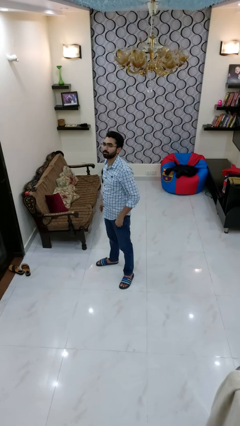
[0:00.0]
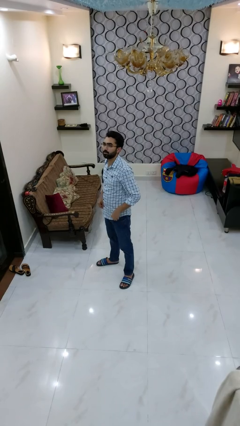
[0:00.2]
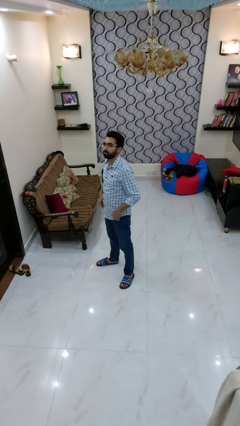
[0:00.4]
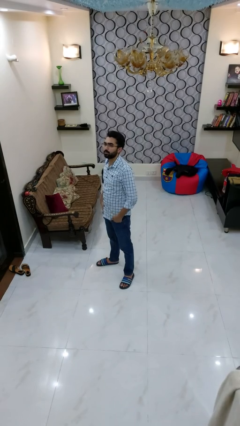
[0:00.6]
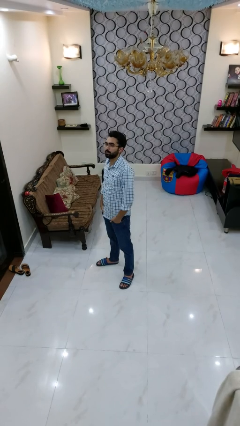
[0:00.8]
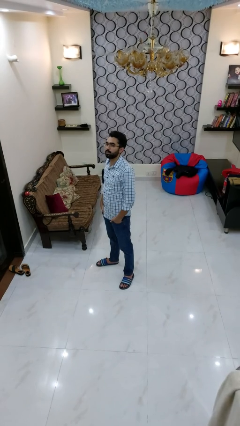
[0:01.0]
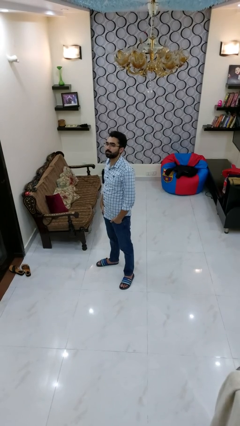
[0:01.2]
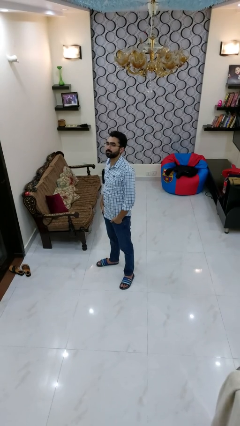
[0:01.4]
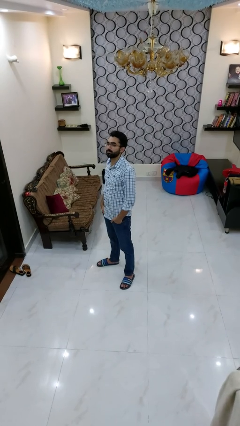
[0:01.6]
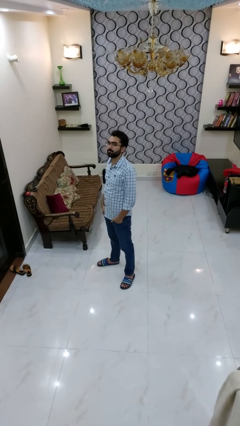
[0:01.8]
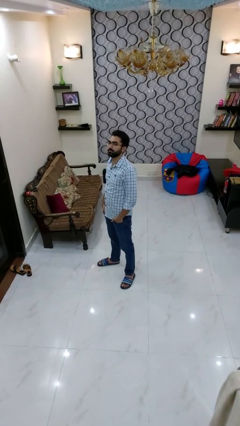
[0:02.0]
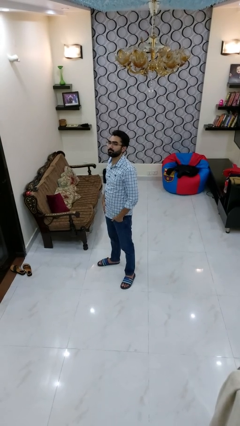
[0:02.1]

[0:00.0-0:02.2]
person puts hands in back pockets

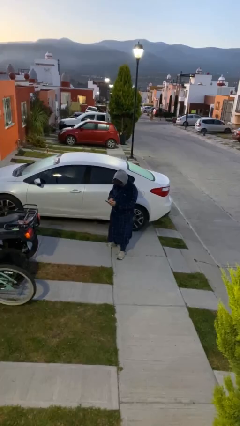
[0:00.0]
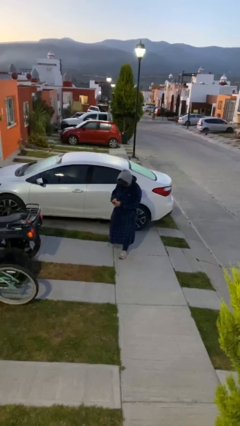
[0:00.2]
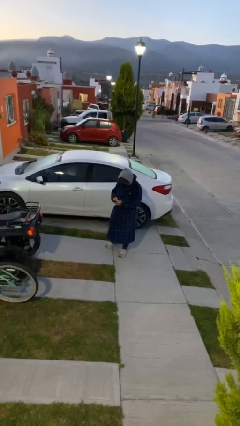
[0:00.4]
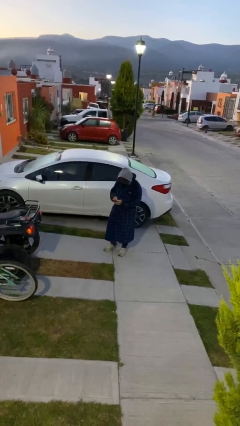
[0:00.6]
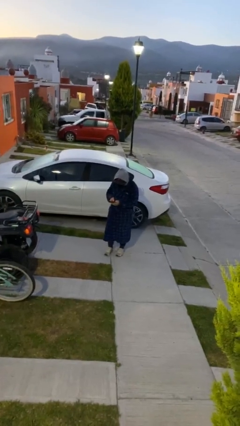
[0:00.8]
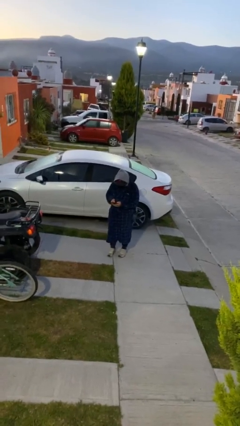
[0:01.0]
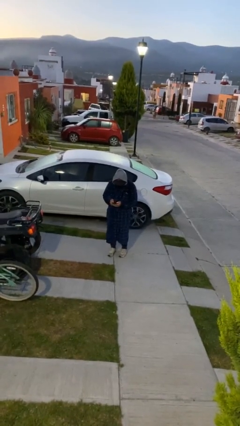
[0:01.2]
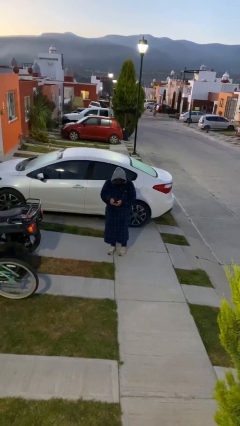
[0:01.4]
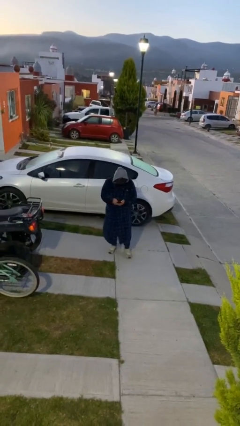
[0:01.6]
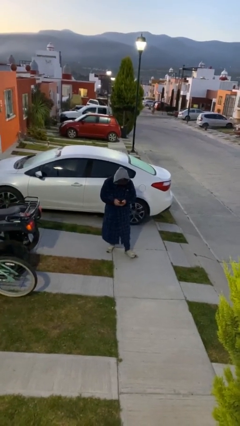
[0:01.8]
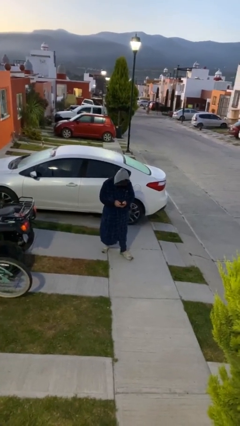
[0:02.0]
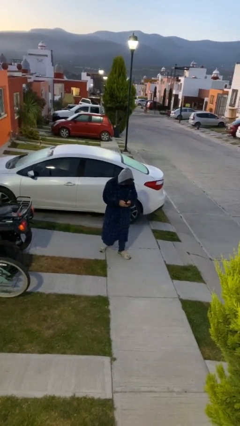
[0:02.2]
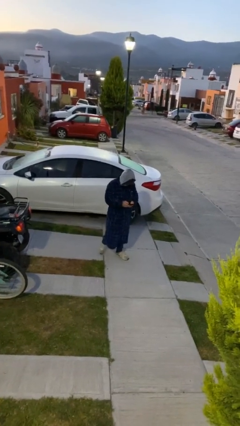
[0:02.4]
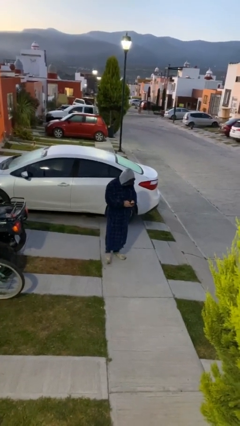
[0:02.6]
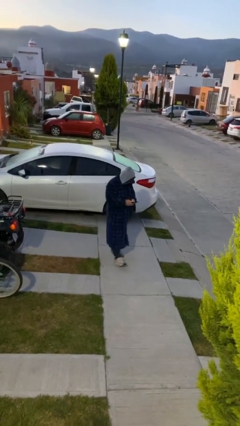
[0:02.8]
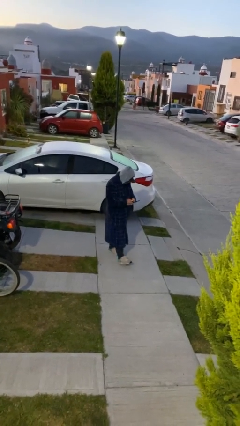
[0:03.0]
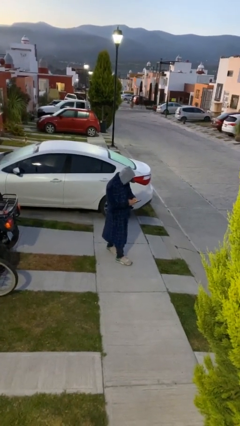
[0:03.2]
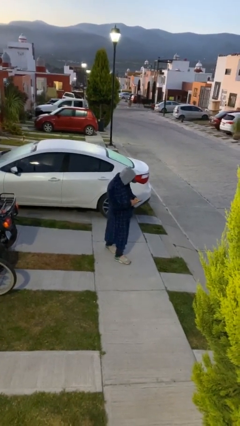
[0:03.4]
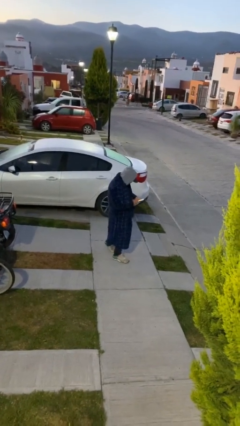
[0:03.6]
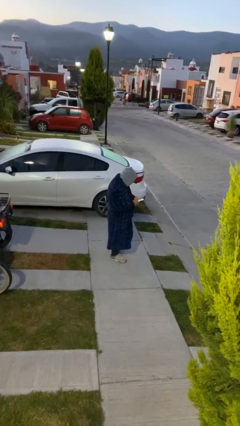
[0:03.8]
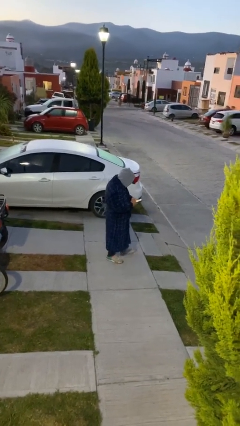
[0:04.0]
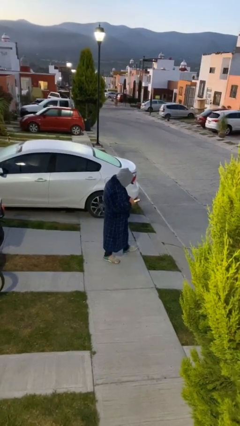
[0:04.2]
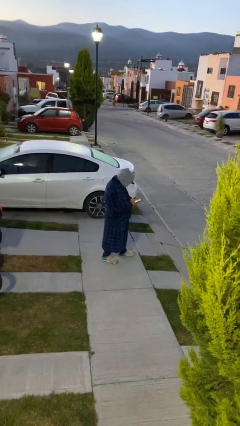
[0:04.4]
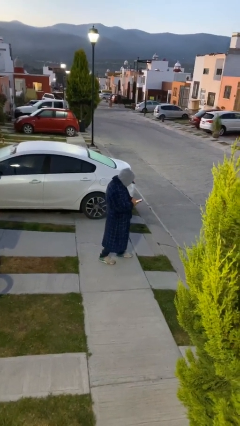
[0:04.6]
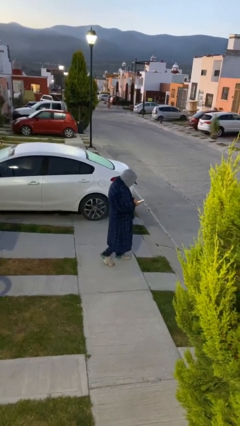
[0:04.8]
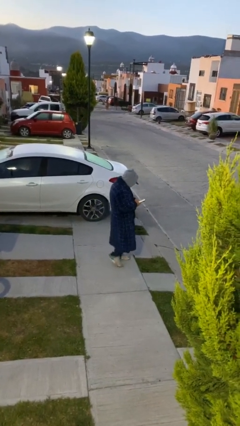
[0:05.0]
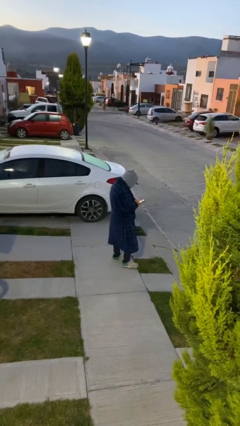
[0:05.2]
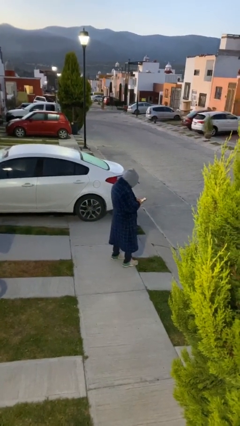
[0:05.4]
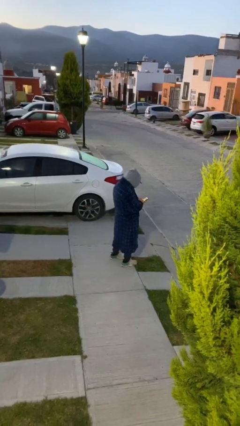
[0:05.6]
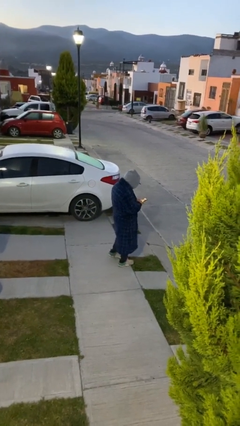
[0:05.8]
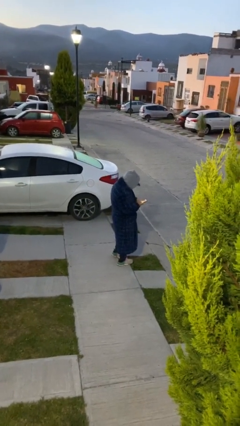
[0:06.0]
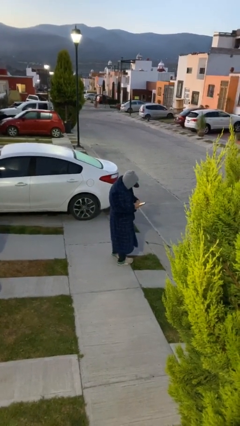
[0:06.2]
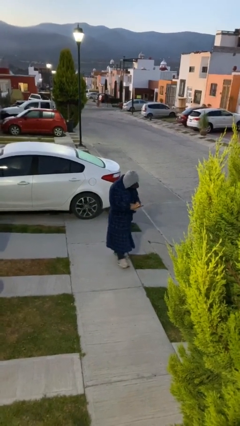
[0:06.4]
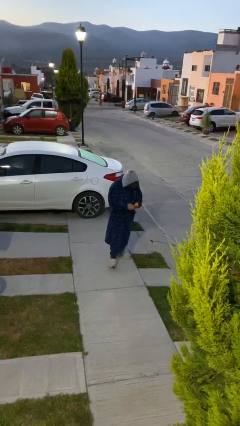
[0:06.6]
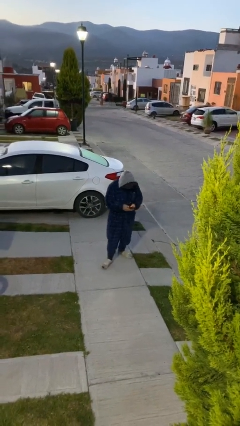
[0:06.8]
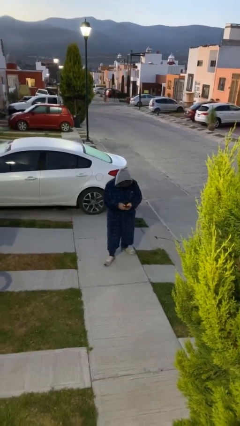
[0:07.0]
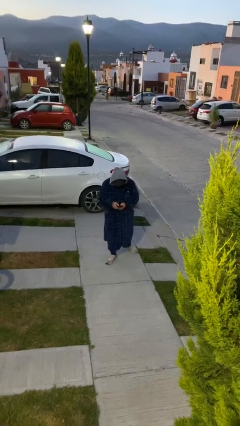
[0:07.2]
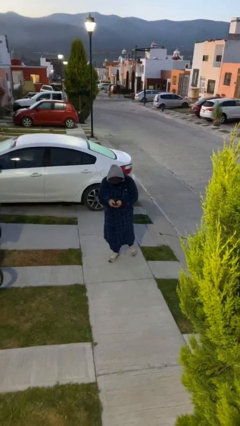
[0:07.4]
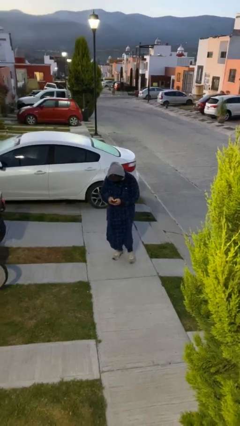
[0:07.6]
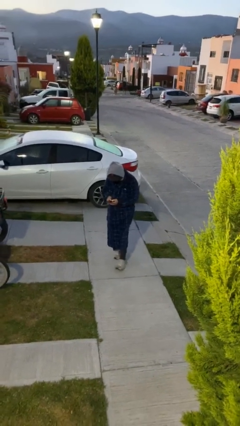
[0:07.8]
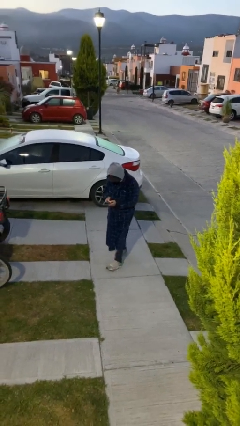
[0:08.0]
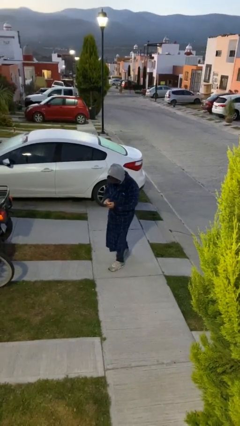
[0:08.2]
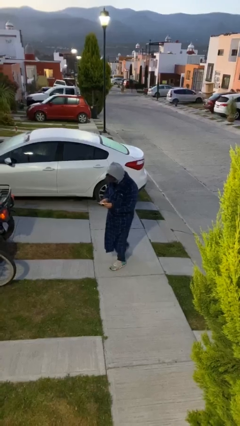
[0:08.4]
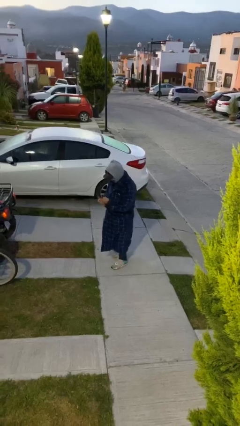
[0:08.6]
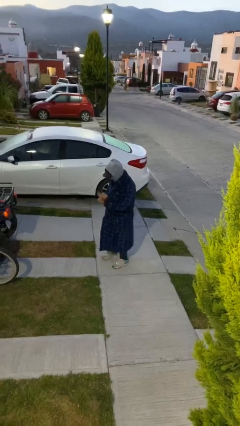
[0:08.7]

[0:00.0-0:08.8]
person texts on phone

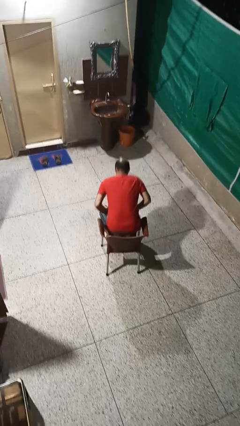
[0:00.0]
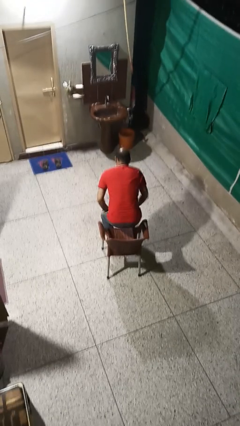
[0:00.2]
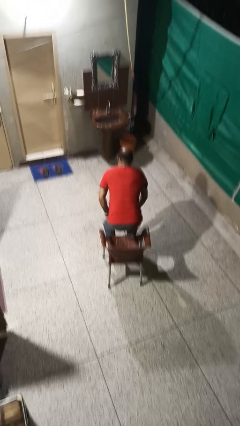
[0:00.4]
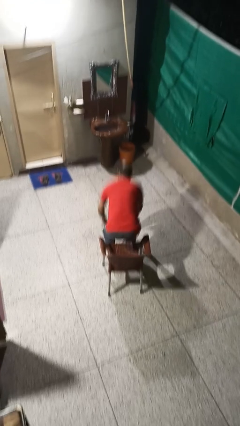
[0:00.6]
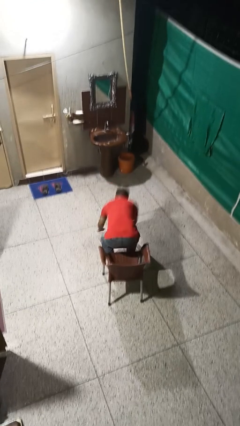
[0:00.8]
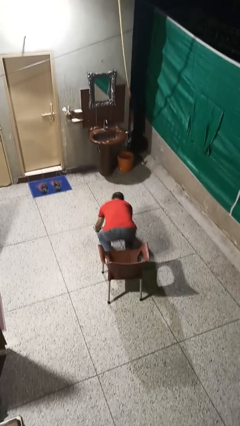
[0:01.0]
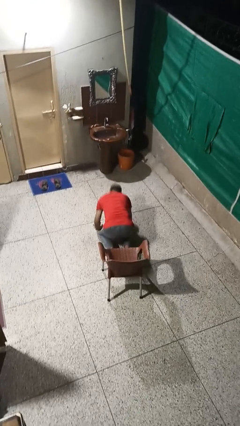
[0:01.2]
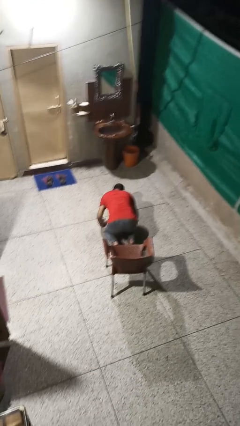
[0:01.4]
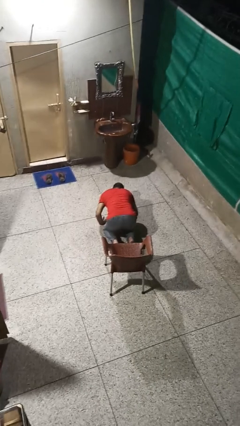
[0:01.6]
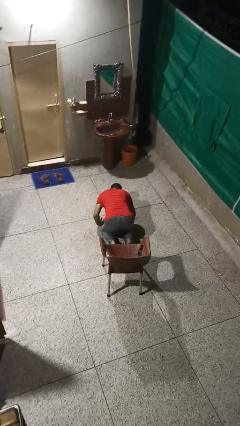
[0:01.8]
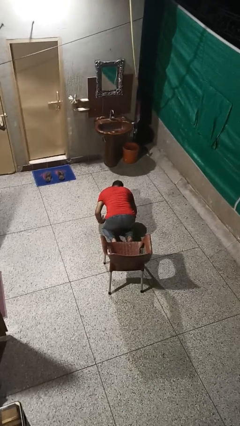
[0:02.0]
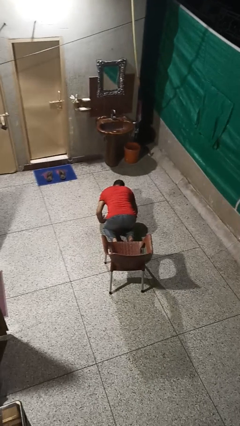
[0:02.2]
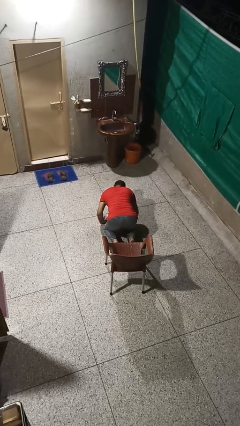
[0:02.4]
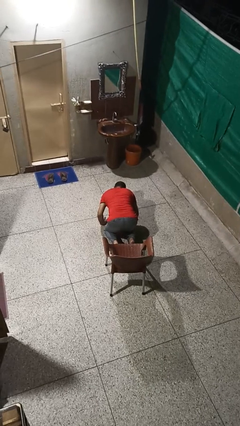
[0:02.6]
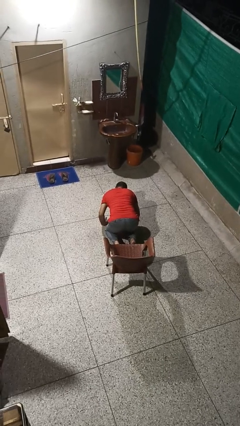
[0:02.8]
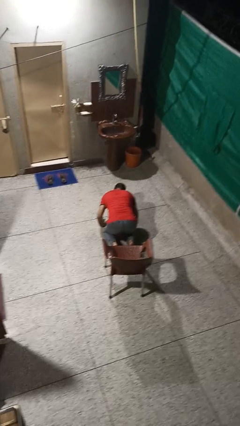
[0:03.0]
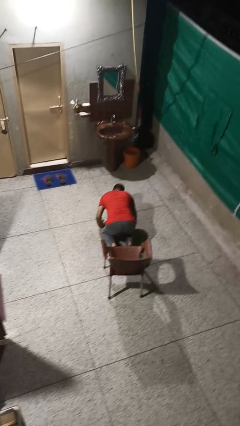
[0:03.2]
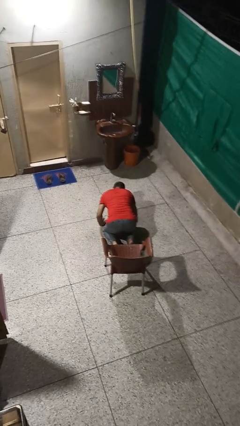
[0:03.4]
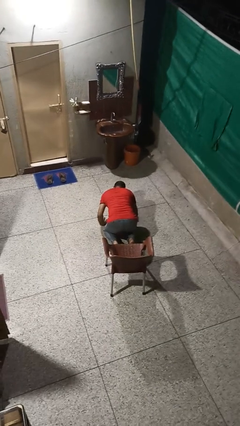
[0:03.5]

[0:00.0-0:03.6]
person falls from chair

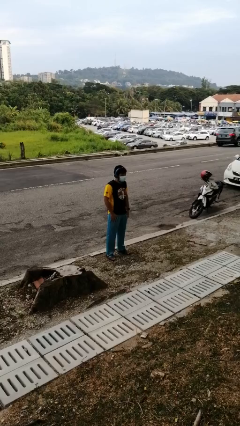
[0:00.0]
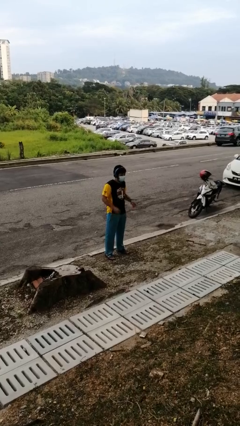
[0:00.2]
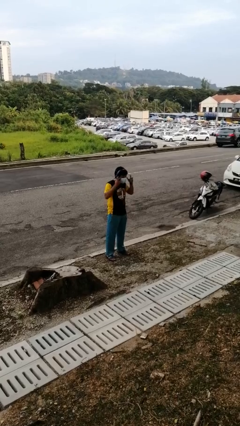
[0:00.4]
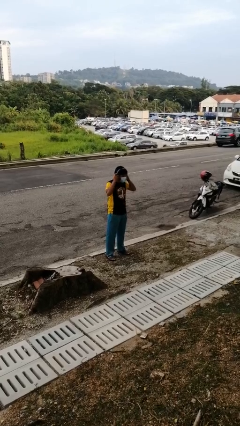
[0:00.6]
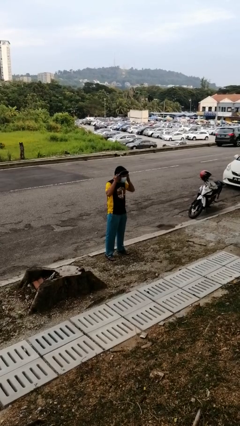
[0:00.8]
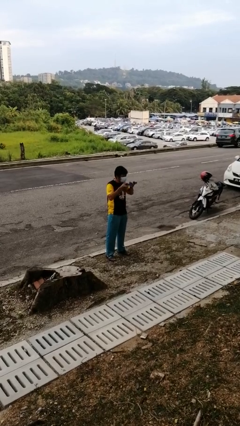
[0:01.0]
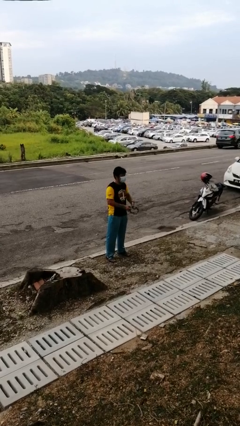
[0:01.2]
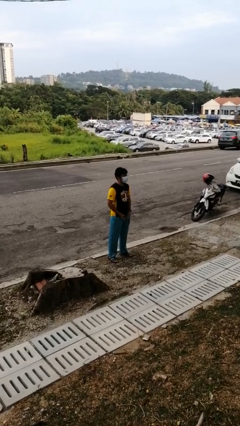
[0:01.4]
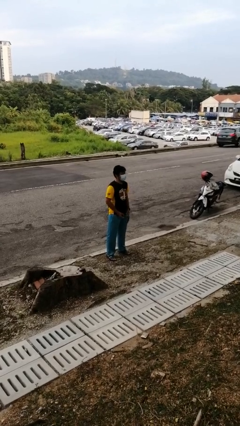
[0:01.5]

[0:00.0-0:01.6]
person takes off headphones

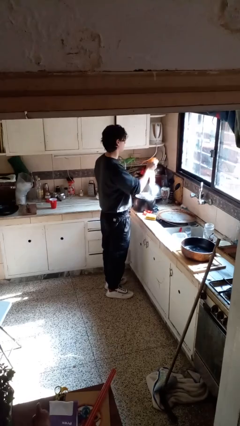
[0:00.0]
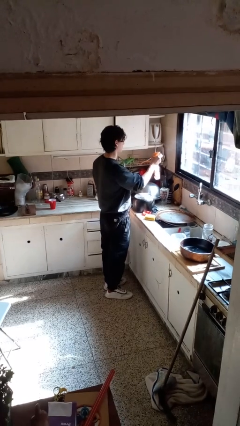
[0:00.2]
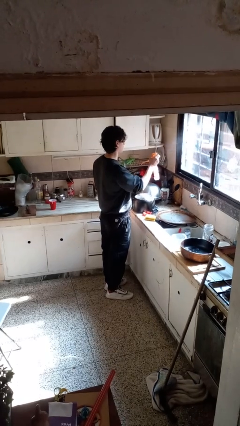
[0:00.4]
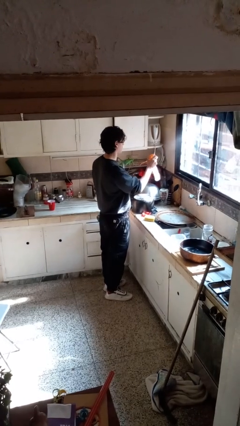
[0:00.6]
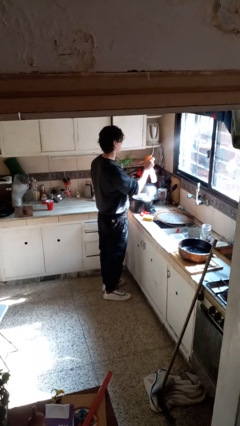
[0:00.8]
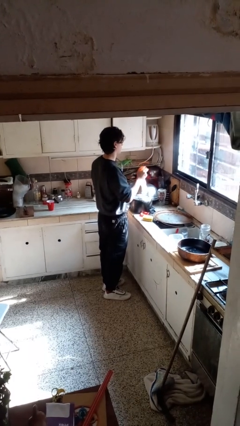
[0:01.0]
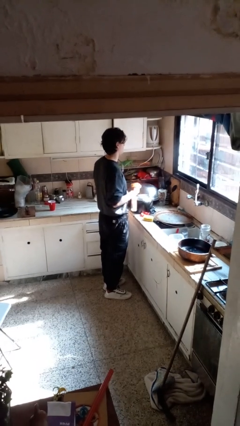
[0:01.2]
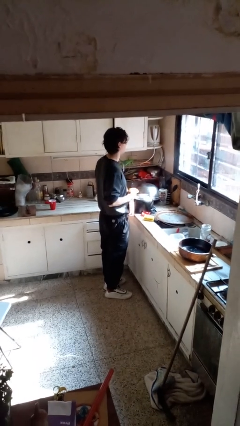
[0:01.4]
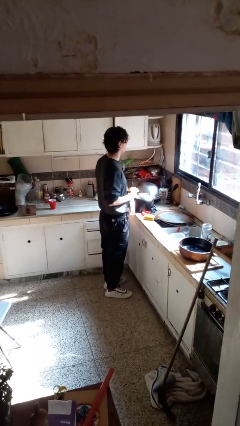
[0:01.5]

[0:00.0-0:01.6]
person sprays from bottle
